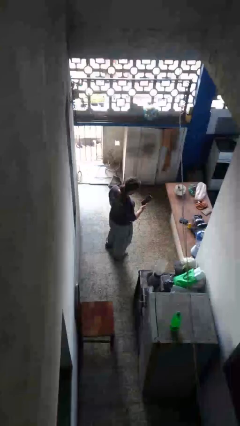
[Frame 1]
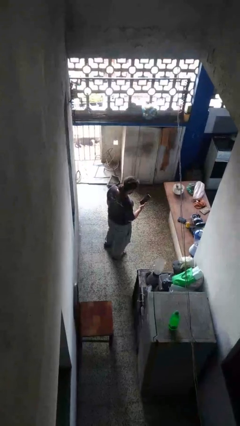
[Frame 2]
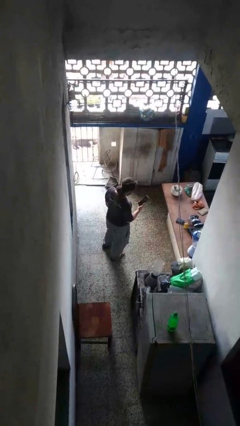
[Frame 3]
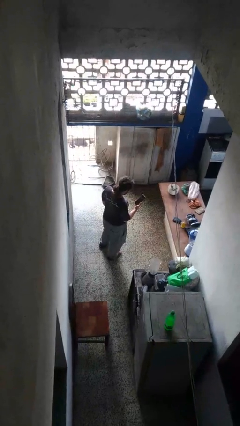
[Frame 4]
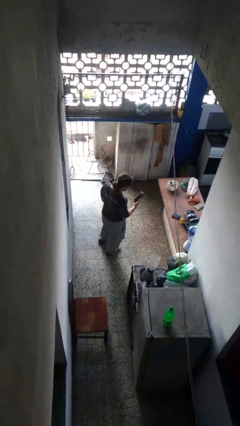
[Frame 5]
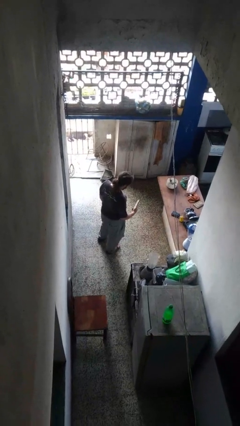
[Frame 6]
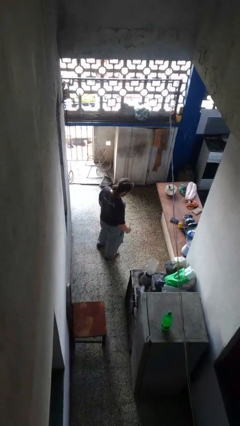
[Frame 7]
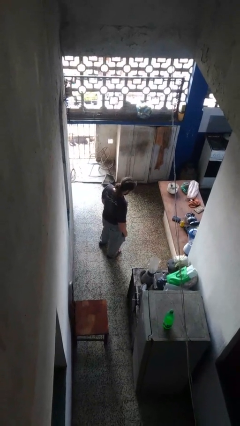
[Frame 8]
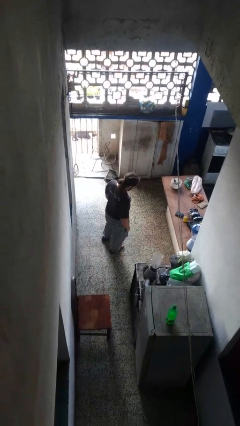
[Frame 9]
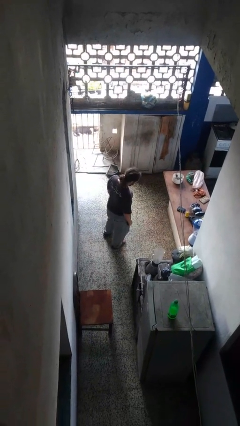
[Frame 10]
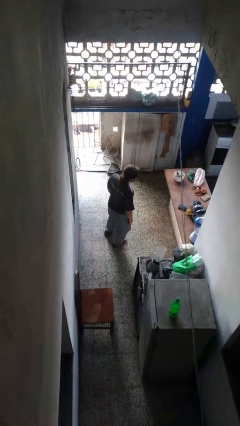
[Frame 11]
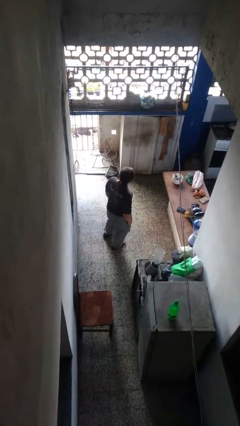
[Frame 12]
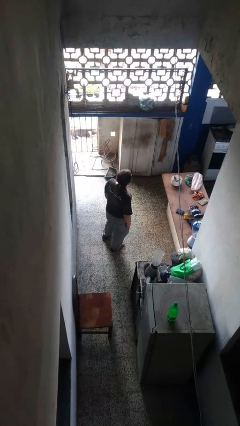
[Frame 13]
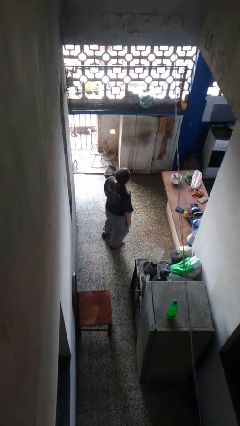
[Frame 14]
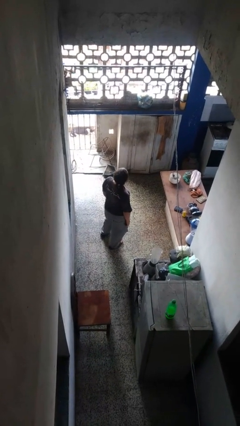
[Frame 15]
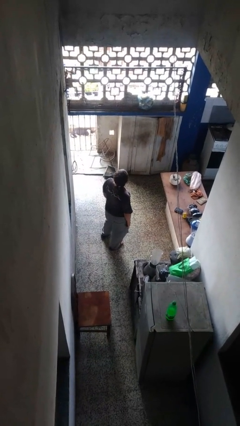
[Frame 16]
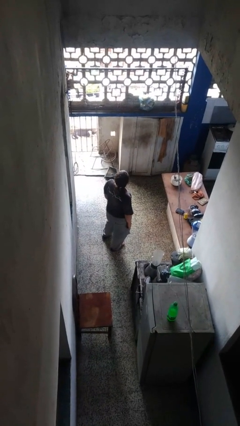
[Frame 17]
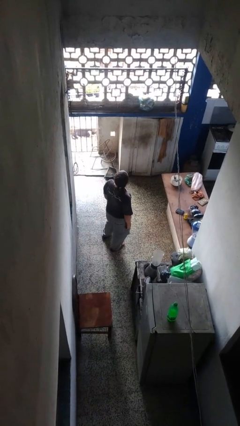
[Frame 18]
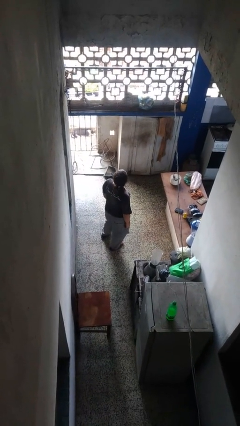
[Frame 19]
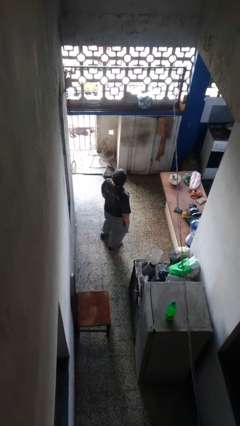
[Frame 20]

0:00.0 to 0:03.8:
person puts phone into pocket

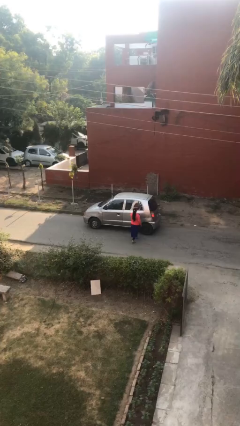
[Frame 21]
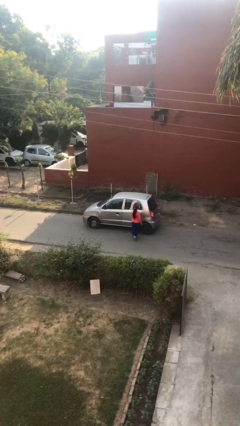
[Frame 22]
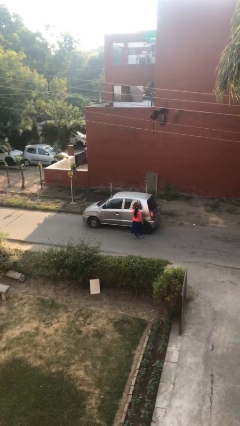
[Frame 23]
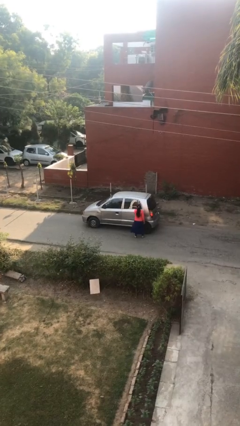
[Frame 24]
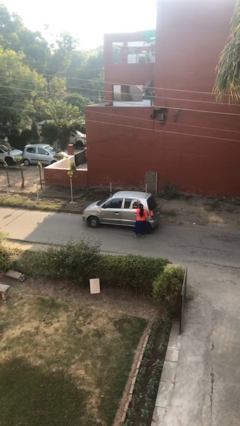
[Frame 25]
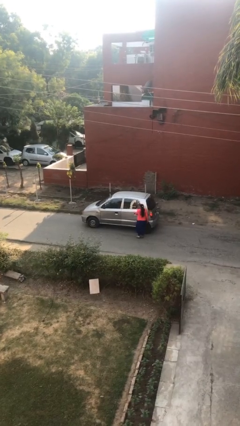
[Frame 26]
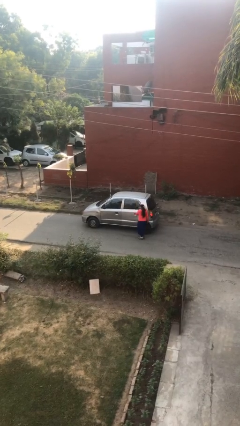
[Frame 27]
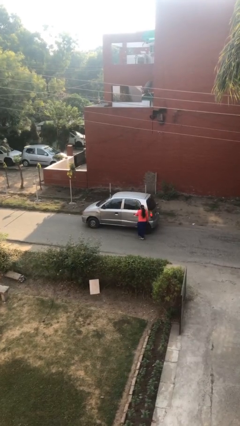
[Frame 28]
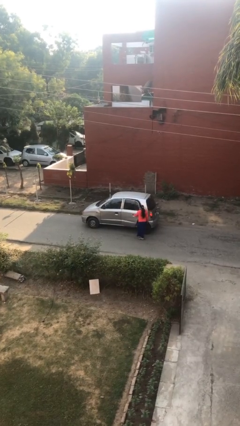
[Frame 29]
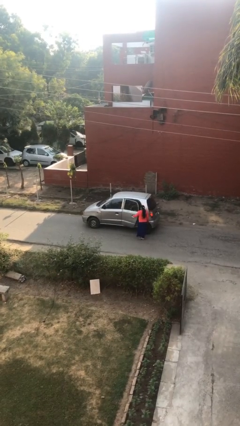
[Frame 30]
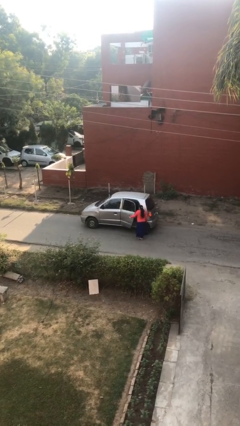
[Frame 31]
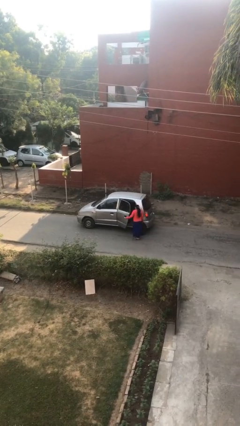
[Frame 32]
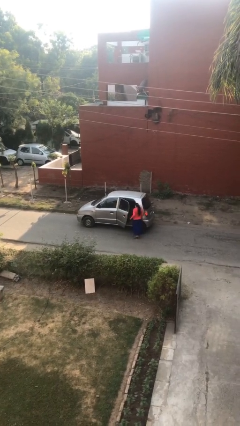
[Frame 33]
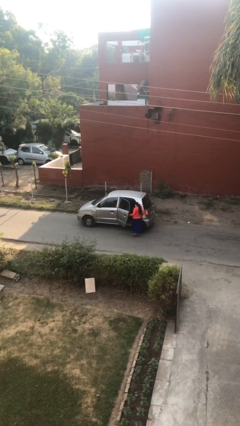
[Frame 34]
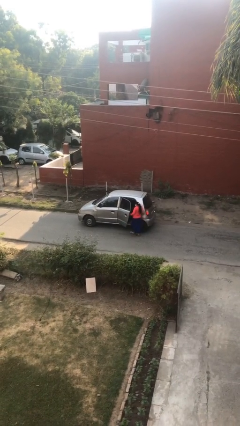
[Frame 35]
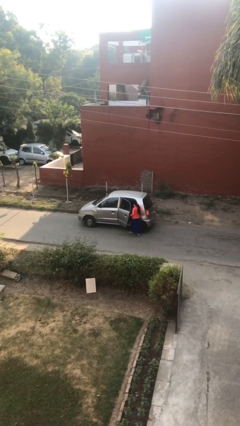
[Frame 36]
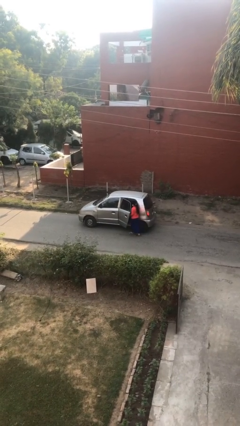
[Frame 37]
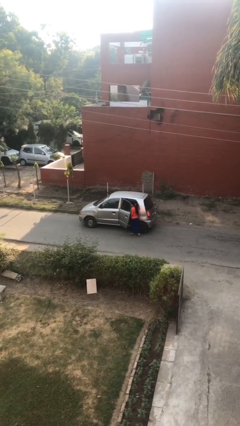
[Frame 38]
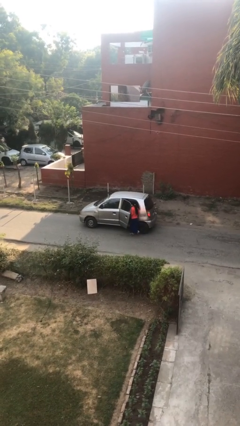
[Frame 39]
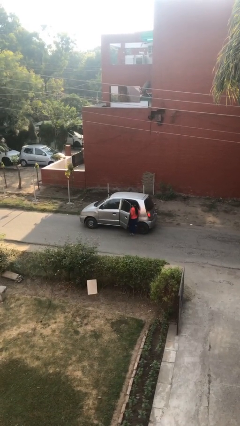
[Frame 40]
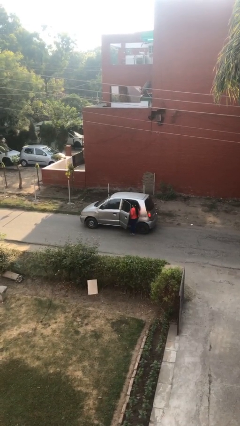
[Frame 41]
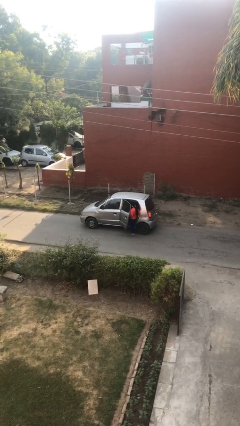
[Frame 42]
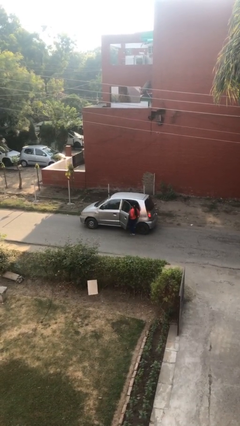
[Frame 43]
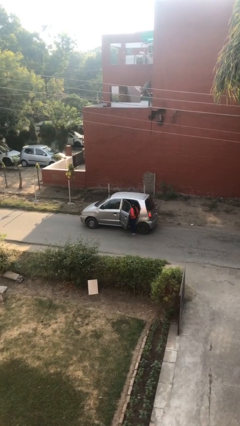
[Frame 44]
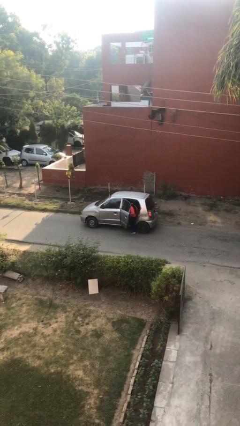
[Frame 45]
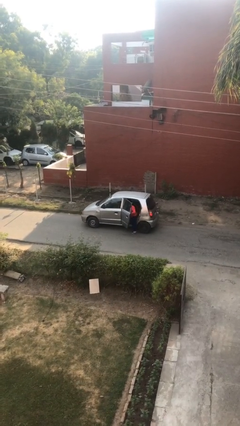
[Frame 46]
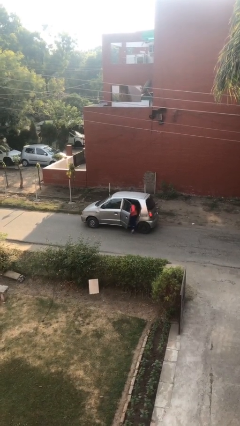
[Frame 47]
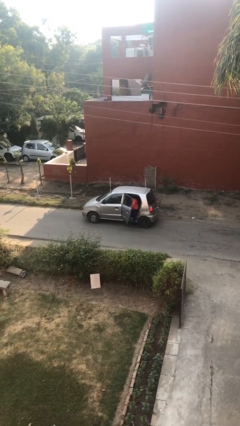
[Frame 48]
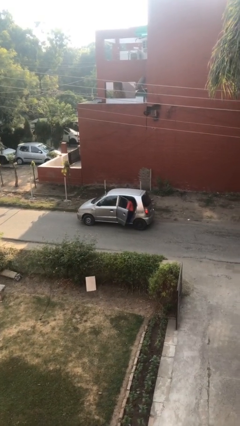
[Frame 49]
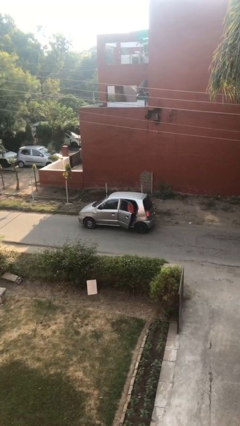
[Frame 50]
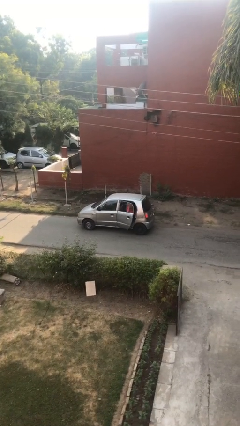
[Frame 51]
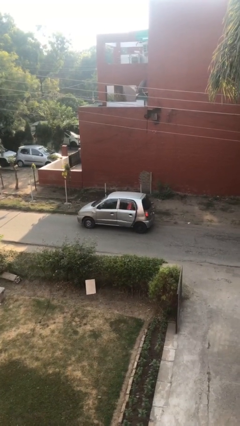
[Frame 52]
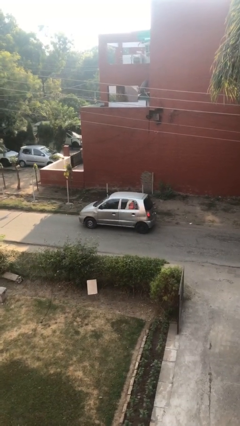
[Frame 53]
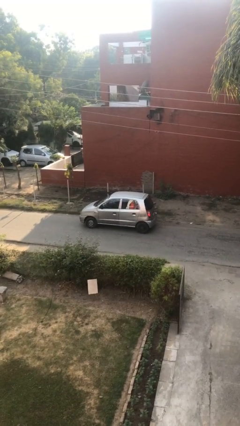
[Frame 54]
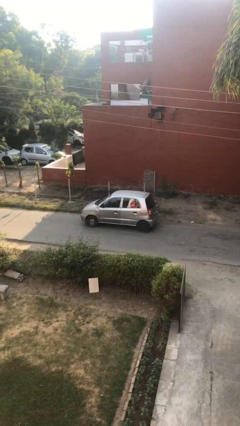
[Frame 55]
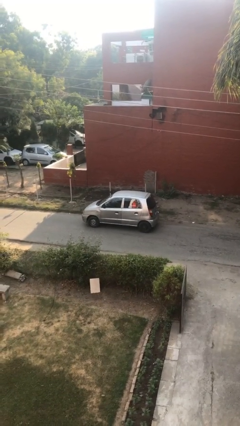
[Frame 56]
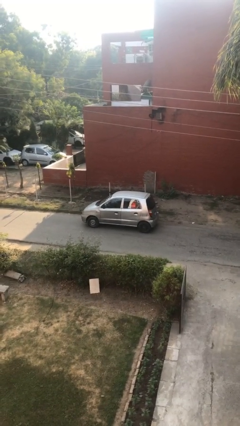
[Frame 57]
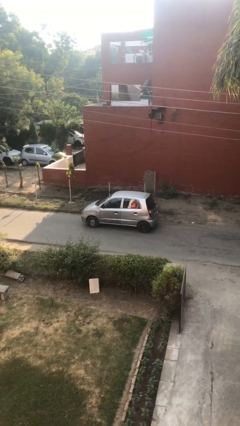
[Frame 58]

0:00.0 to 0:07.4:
car picks up person

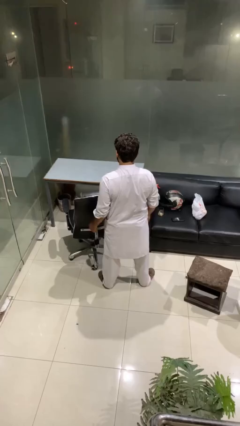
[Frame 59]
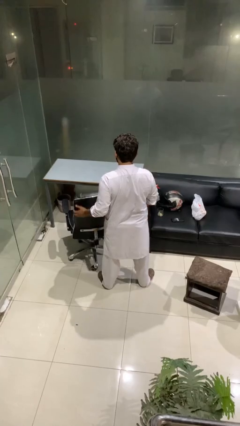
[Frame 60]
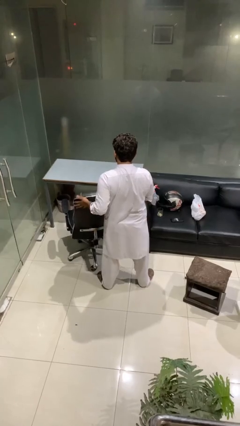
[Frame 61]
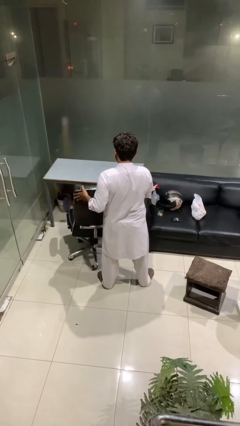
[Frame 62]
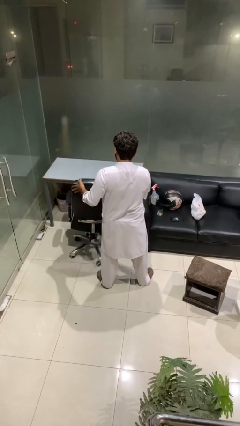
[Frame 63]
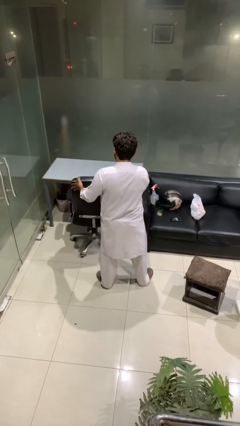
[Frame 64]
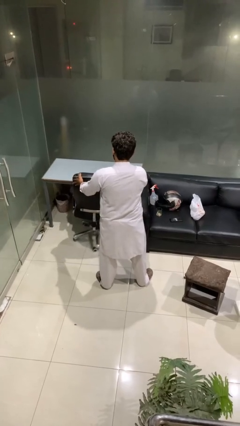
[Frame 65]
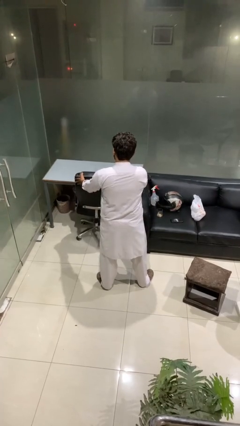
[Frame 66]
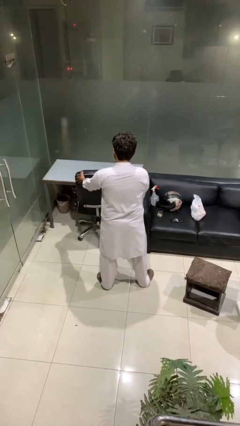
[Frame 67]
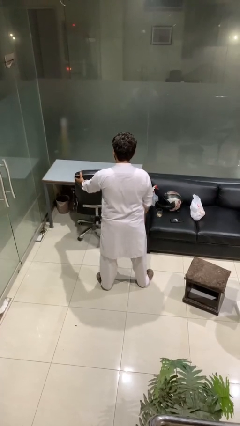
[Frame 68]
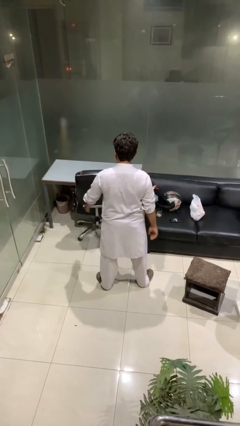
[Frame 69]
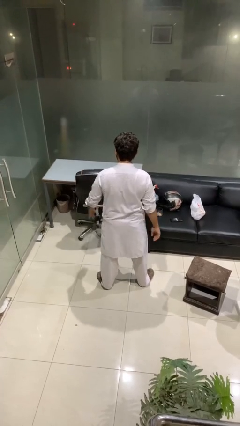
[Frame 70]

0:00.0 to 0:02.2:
person pushes in chair

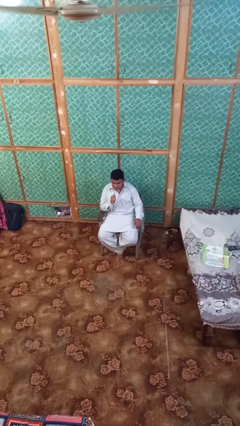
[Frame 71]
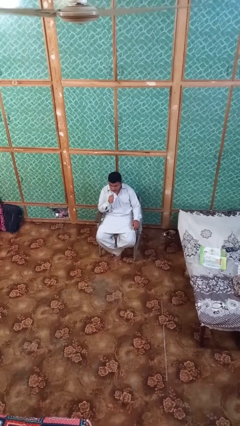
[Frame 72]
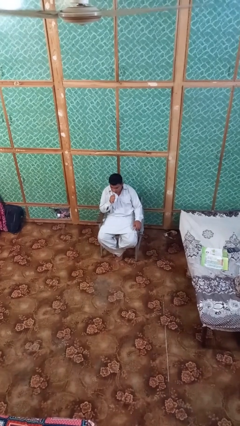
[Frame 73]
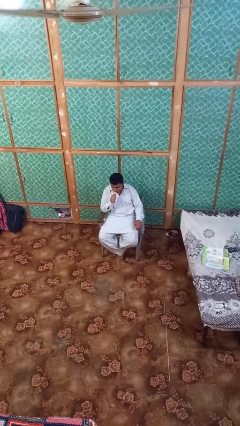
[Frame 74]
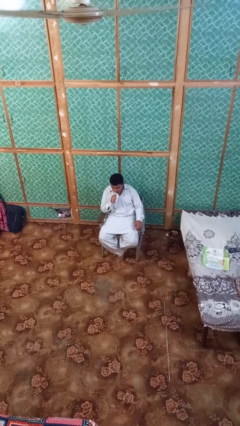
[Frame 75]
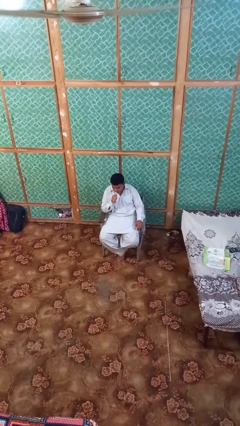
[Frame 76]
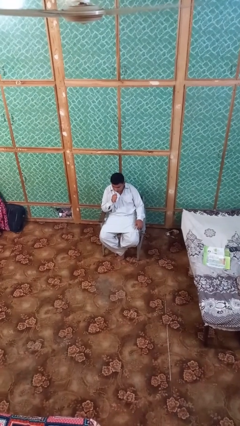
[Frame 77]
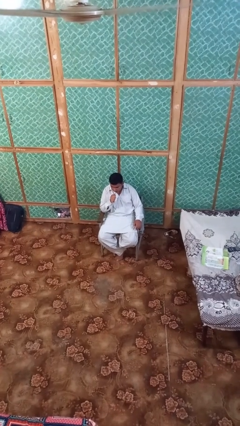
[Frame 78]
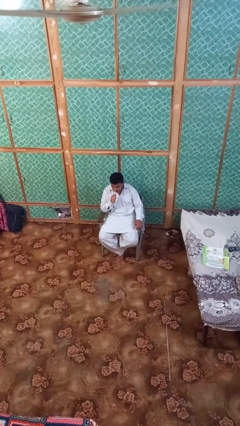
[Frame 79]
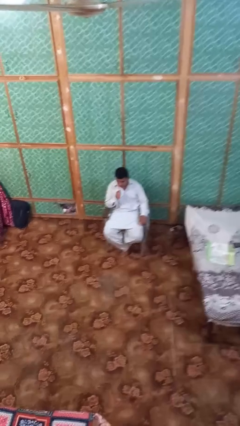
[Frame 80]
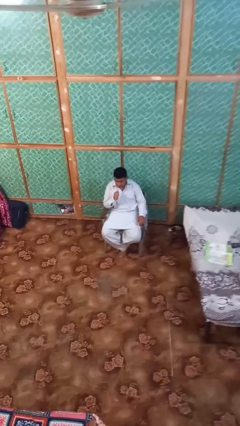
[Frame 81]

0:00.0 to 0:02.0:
person vapes

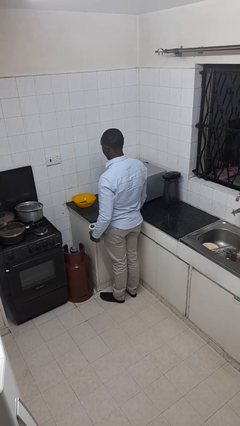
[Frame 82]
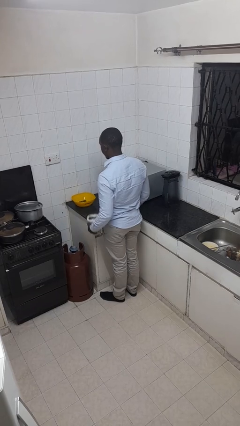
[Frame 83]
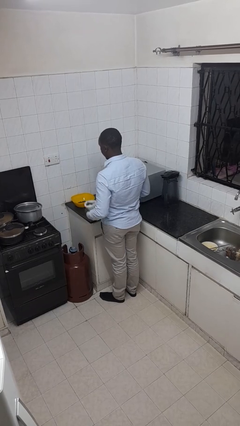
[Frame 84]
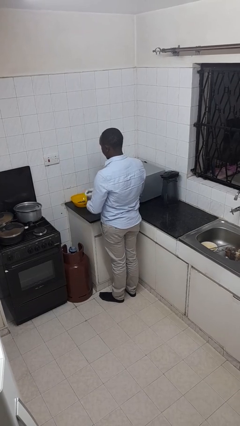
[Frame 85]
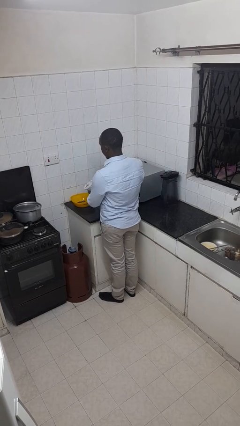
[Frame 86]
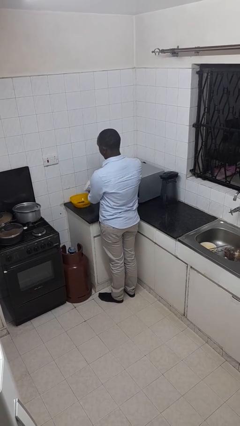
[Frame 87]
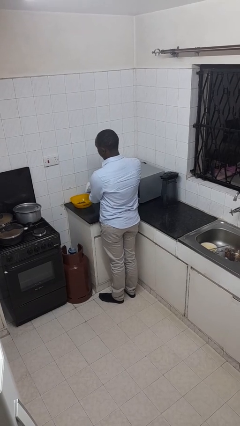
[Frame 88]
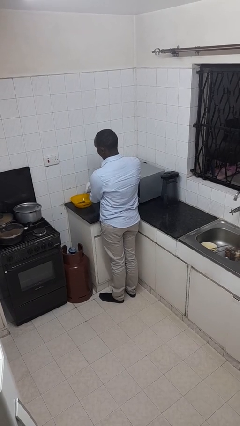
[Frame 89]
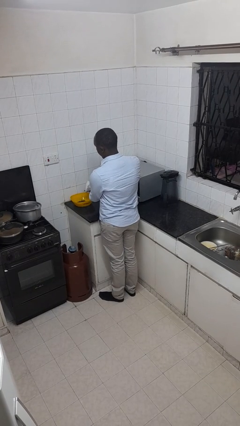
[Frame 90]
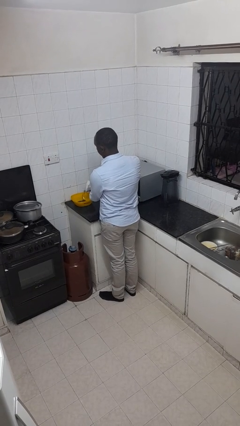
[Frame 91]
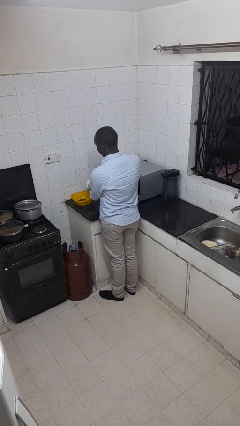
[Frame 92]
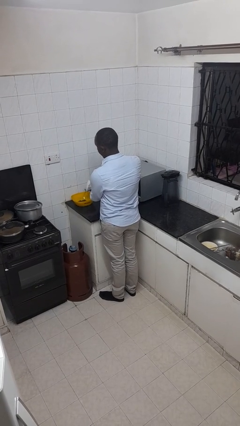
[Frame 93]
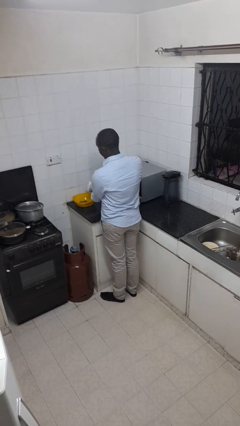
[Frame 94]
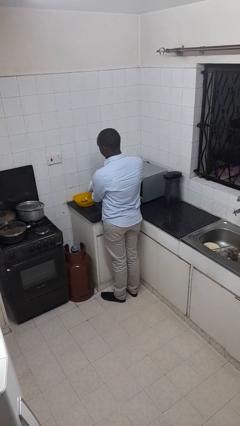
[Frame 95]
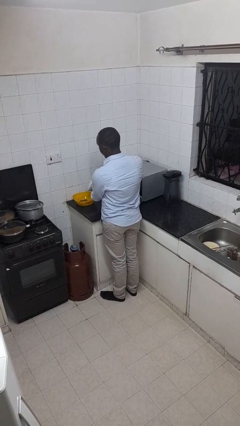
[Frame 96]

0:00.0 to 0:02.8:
person pours into bowl
